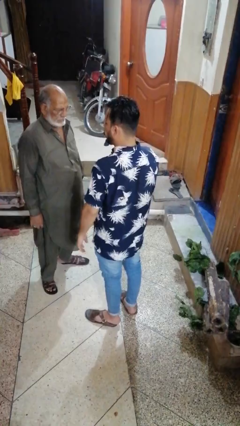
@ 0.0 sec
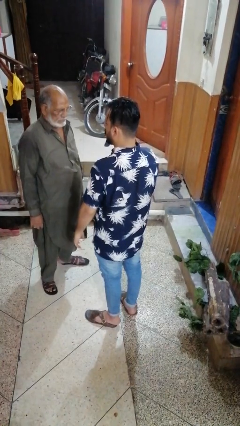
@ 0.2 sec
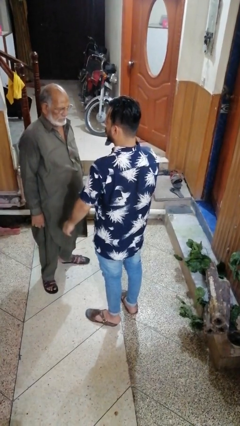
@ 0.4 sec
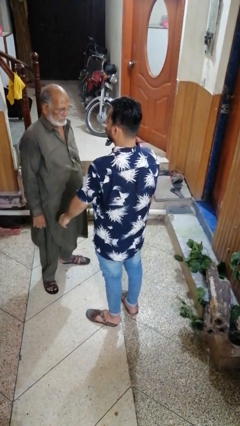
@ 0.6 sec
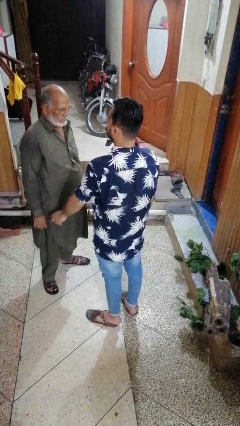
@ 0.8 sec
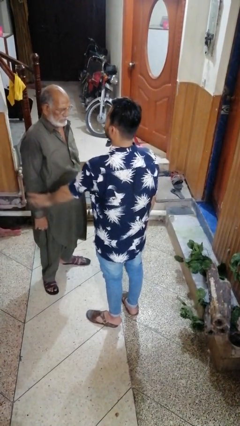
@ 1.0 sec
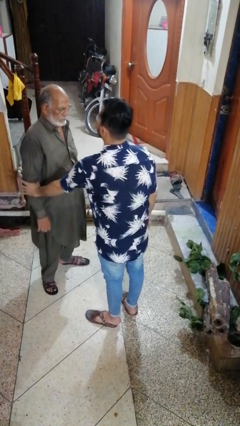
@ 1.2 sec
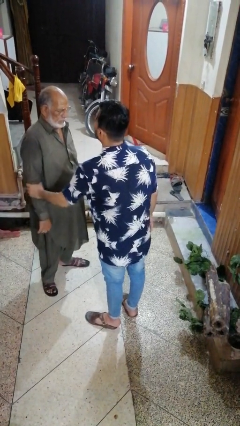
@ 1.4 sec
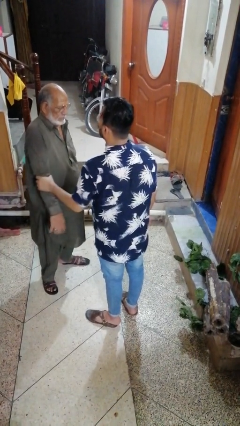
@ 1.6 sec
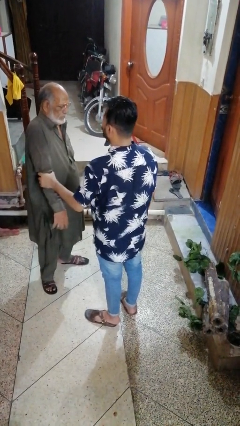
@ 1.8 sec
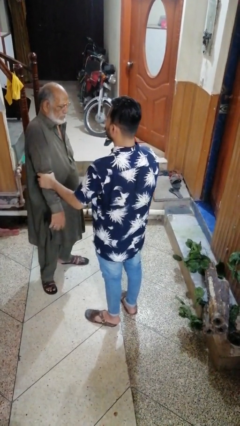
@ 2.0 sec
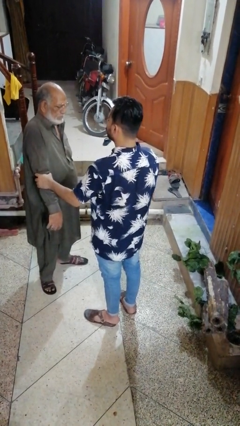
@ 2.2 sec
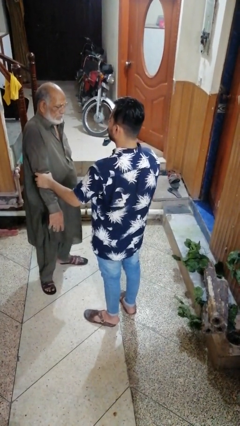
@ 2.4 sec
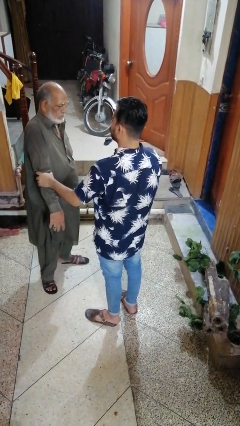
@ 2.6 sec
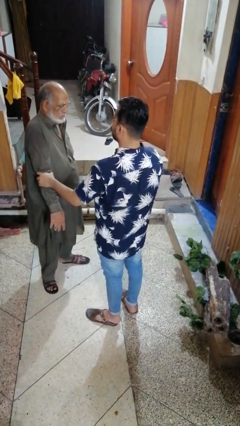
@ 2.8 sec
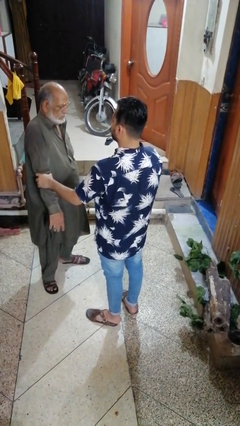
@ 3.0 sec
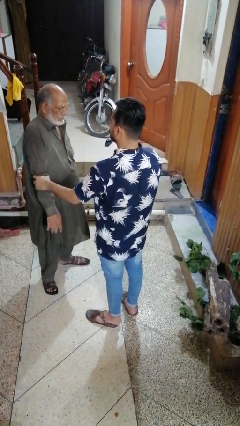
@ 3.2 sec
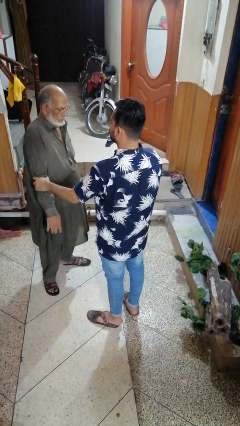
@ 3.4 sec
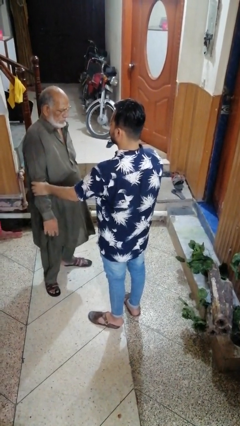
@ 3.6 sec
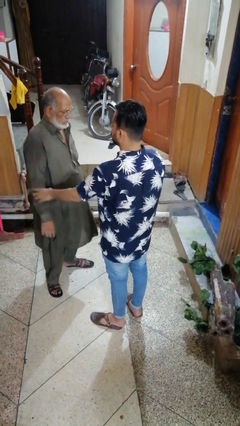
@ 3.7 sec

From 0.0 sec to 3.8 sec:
person grabs person by forearm

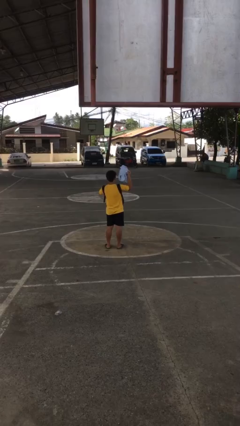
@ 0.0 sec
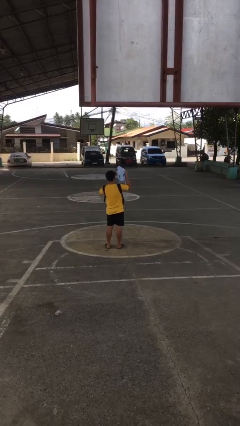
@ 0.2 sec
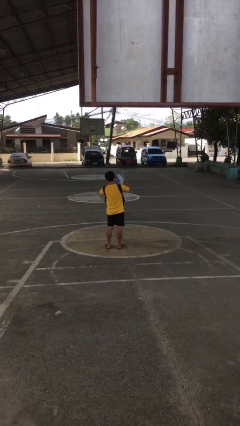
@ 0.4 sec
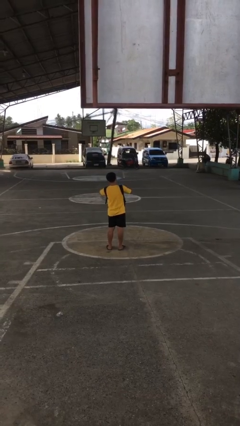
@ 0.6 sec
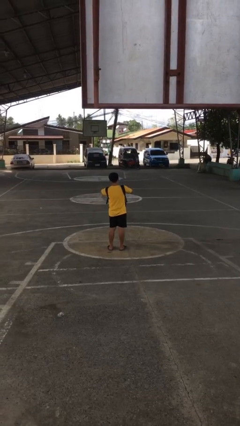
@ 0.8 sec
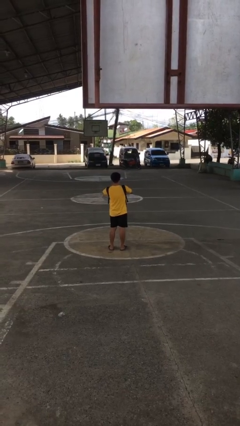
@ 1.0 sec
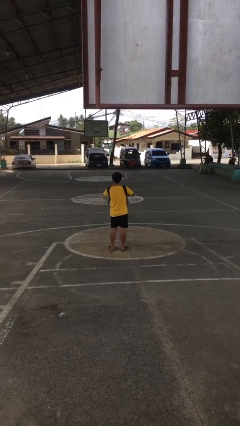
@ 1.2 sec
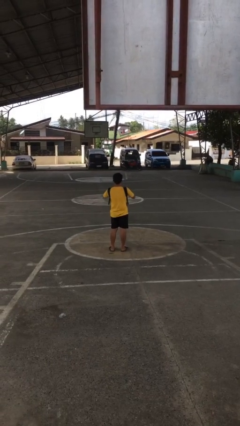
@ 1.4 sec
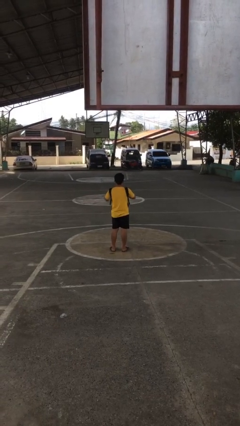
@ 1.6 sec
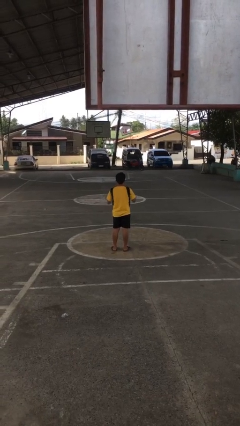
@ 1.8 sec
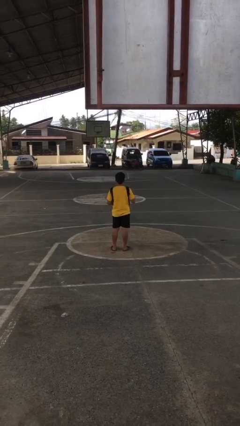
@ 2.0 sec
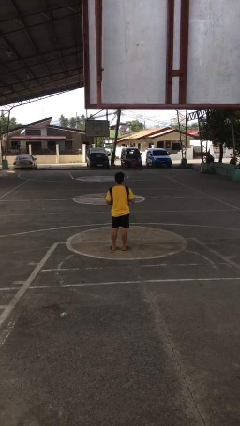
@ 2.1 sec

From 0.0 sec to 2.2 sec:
person puts object into backpack

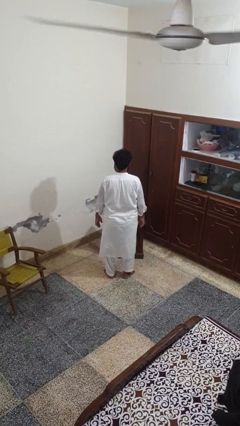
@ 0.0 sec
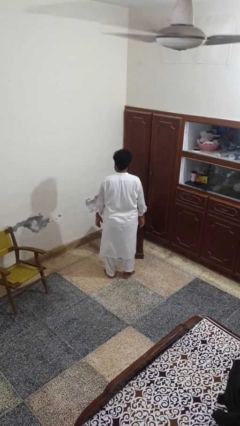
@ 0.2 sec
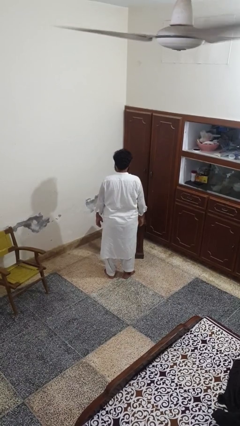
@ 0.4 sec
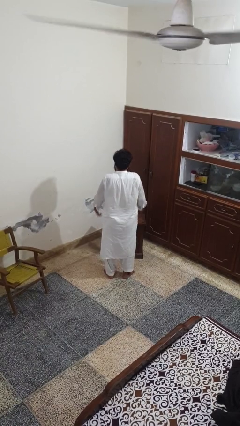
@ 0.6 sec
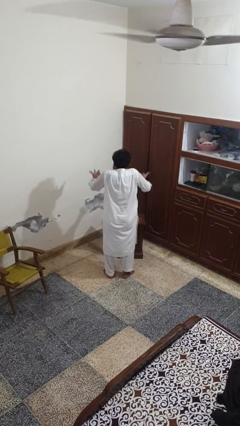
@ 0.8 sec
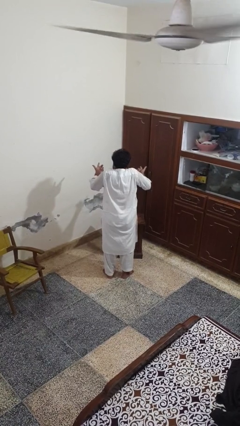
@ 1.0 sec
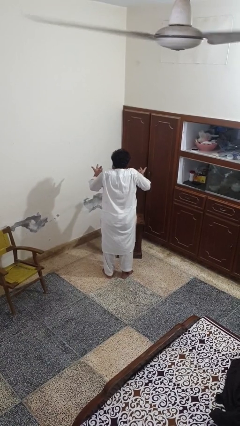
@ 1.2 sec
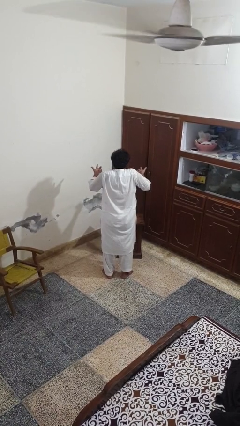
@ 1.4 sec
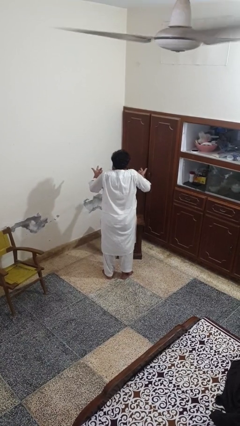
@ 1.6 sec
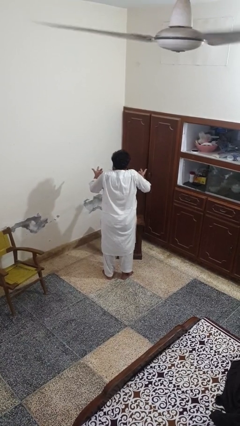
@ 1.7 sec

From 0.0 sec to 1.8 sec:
person shrugs

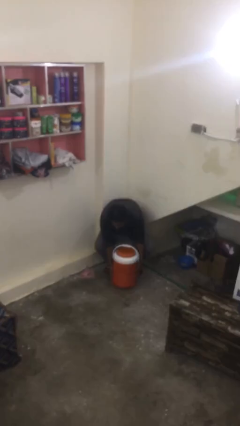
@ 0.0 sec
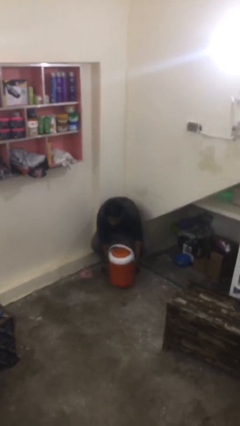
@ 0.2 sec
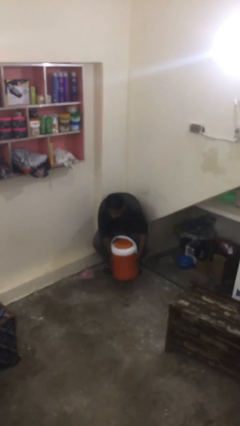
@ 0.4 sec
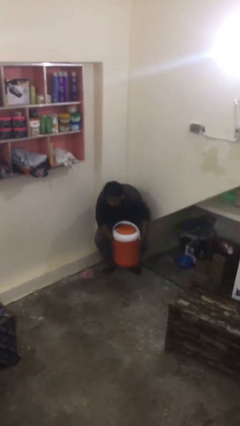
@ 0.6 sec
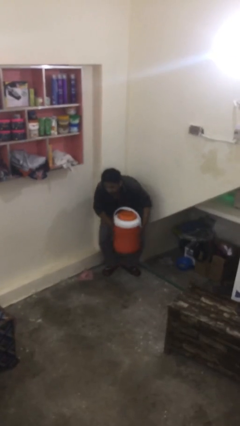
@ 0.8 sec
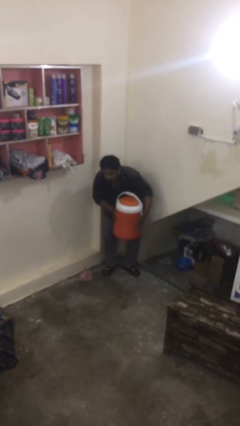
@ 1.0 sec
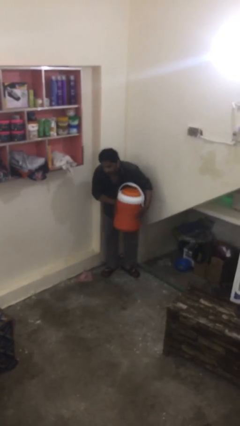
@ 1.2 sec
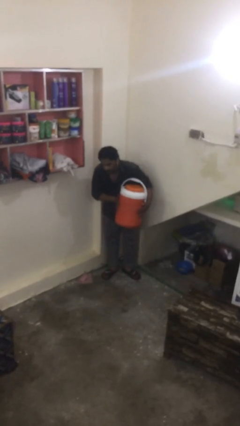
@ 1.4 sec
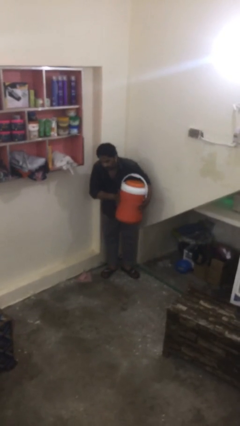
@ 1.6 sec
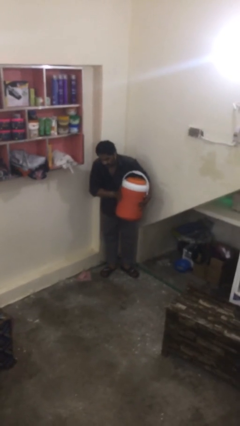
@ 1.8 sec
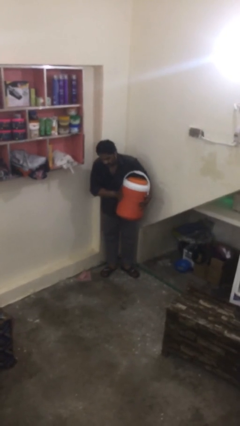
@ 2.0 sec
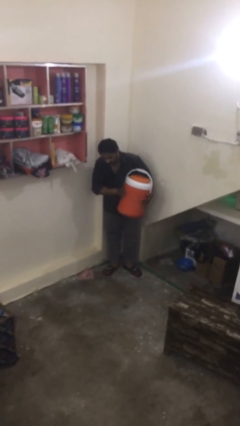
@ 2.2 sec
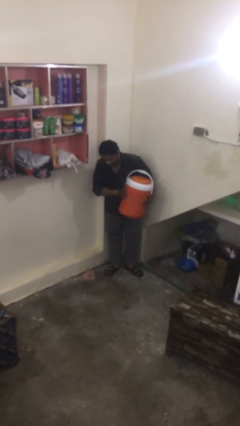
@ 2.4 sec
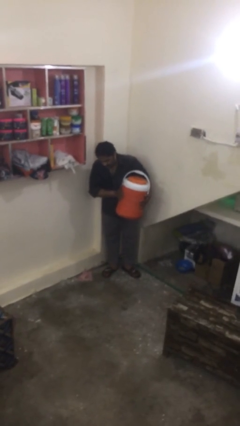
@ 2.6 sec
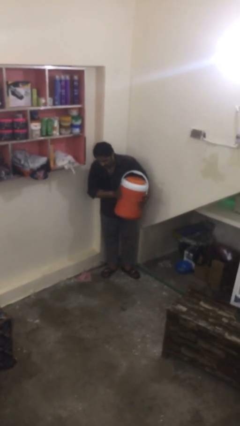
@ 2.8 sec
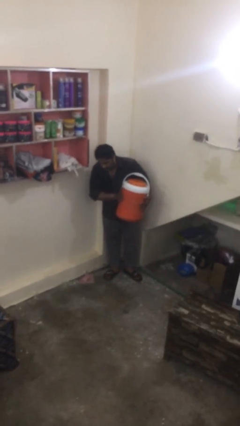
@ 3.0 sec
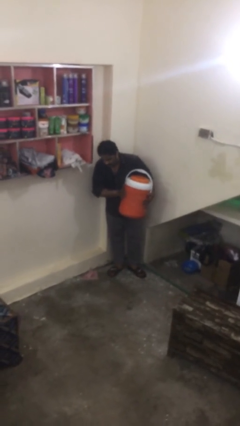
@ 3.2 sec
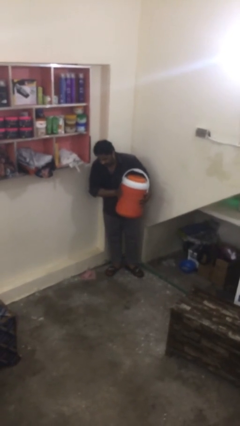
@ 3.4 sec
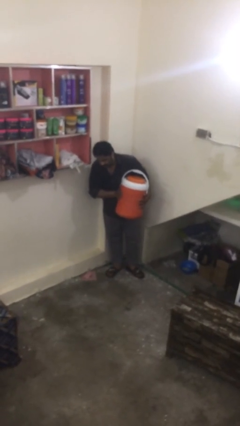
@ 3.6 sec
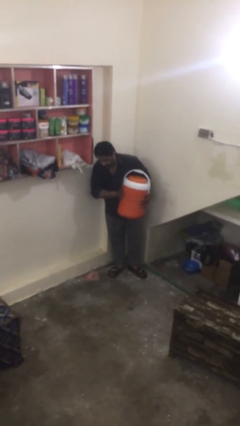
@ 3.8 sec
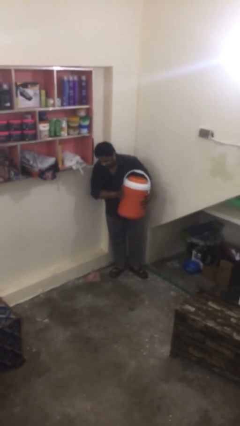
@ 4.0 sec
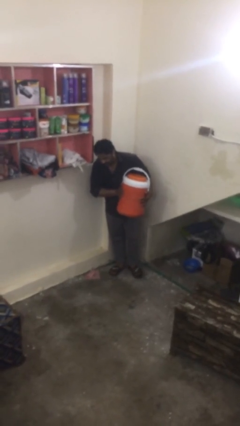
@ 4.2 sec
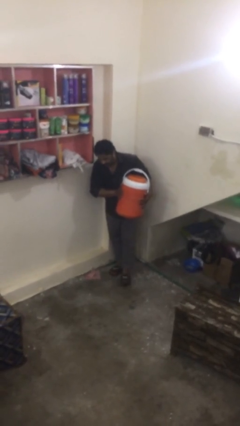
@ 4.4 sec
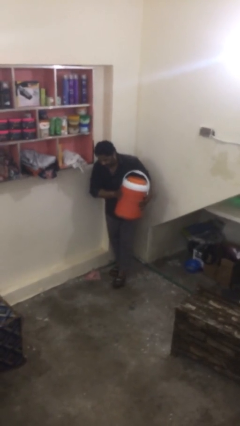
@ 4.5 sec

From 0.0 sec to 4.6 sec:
person picks up object from floor

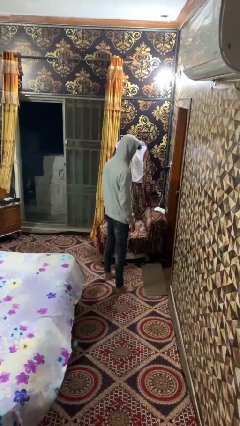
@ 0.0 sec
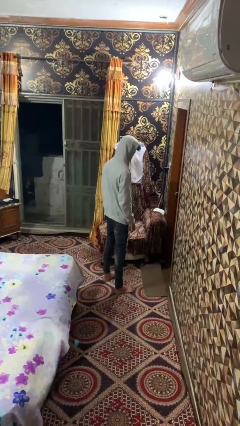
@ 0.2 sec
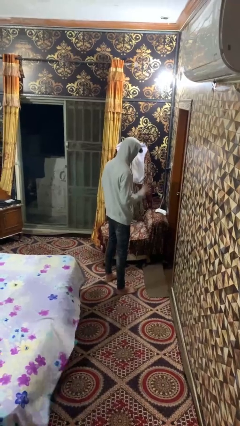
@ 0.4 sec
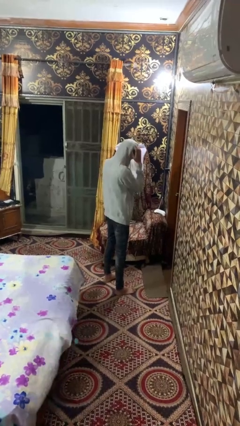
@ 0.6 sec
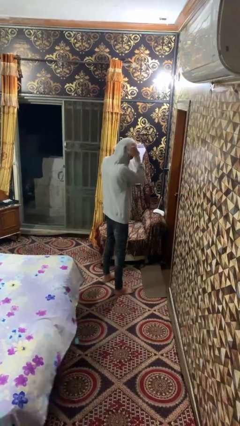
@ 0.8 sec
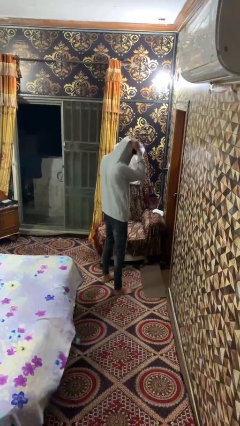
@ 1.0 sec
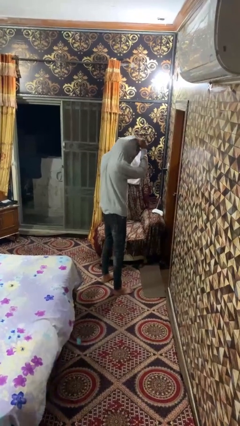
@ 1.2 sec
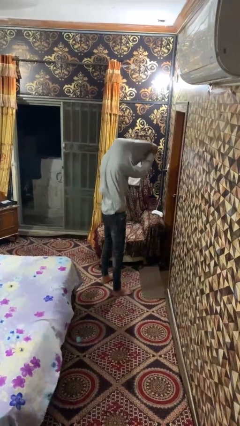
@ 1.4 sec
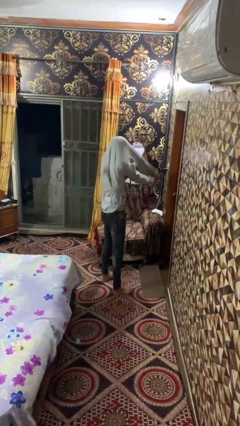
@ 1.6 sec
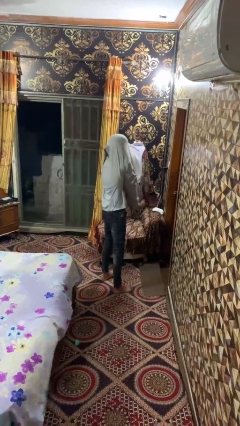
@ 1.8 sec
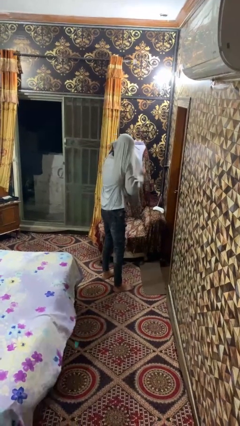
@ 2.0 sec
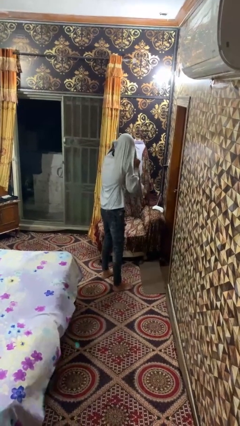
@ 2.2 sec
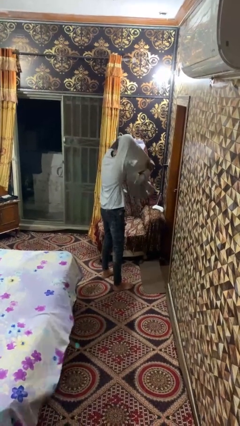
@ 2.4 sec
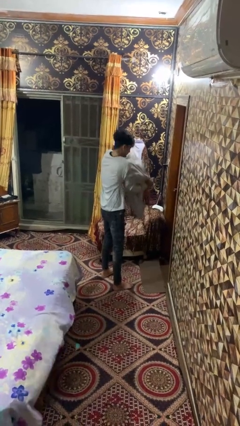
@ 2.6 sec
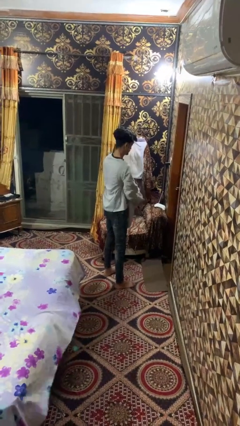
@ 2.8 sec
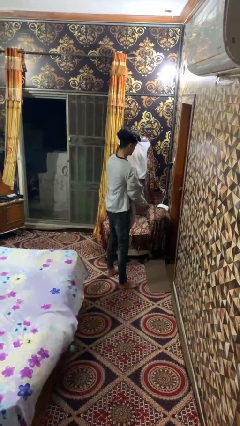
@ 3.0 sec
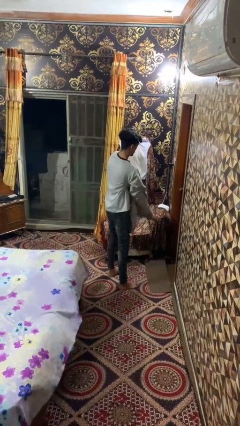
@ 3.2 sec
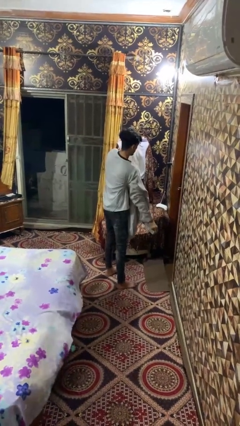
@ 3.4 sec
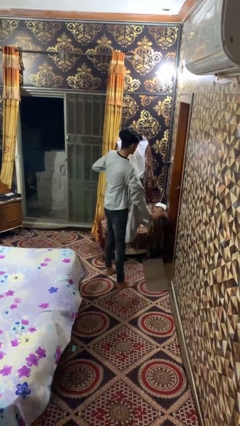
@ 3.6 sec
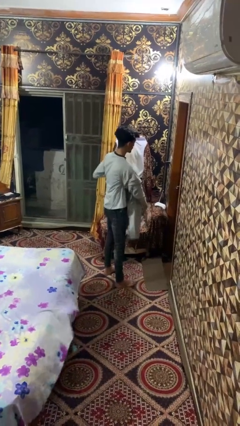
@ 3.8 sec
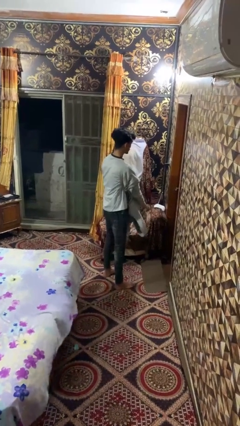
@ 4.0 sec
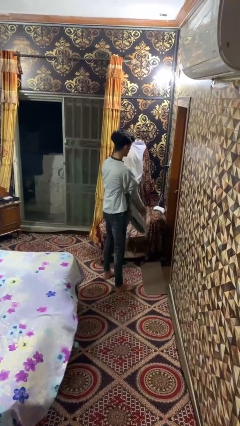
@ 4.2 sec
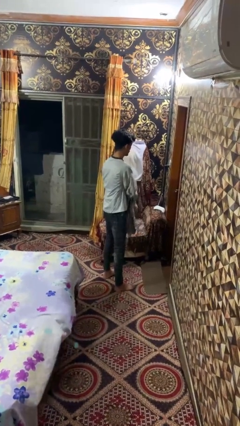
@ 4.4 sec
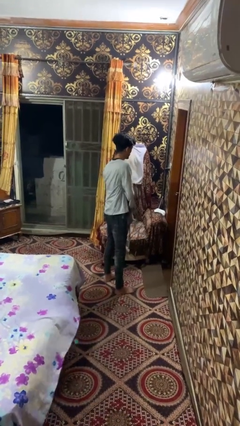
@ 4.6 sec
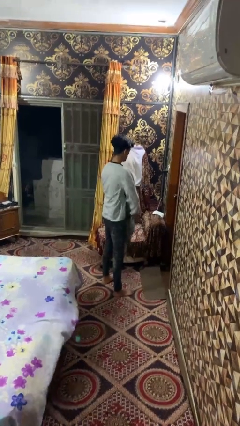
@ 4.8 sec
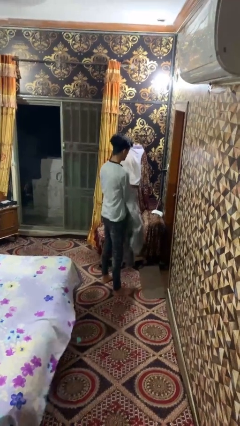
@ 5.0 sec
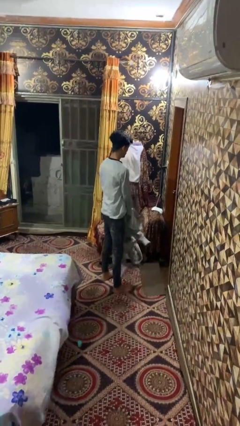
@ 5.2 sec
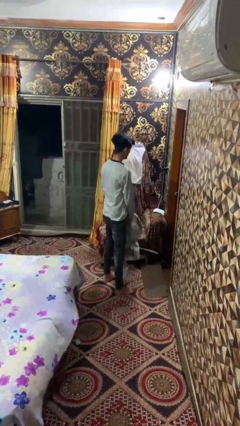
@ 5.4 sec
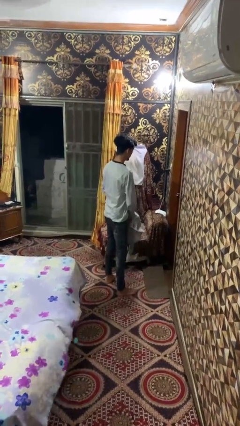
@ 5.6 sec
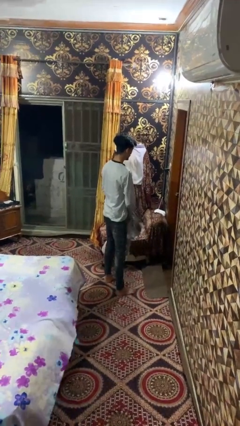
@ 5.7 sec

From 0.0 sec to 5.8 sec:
person takes off hoodie
